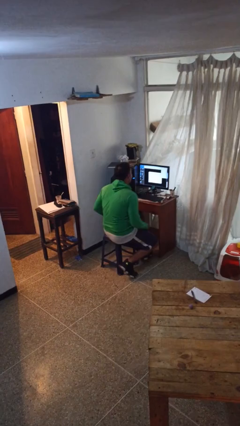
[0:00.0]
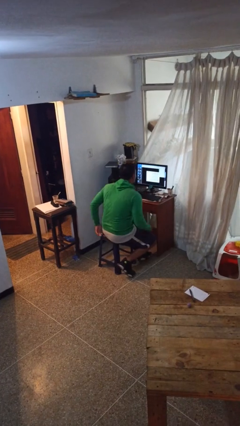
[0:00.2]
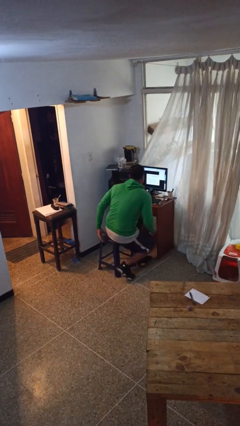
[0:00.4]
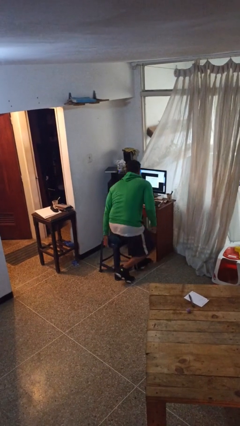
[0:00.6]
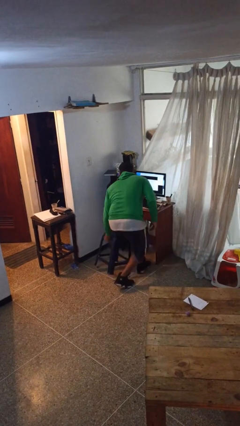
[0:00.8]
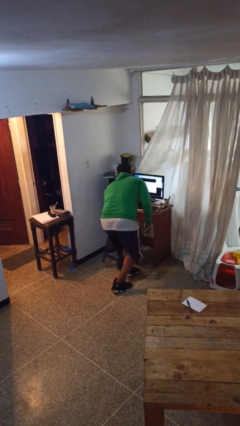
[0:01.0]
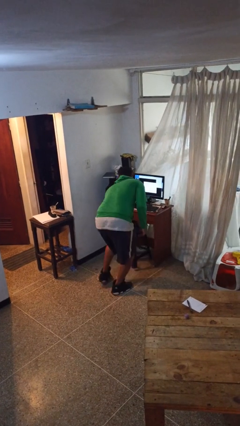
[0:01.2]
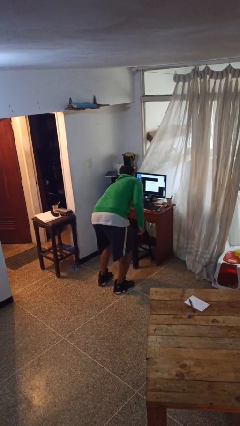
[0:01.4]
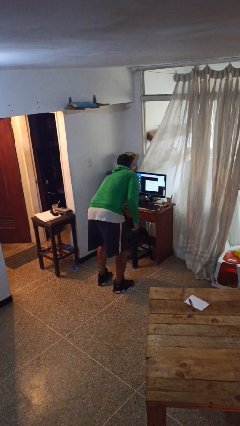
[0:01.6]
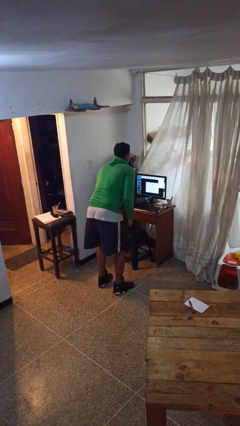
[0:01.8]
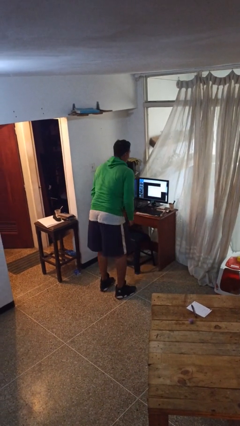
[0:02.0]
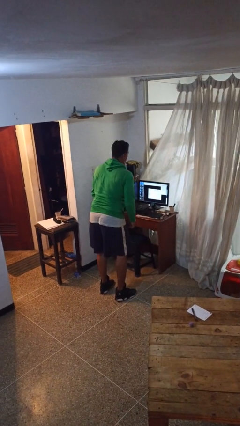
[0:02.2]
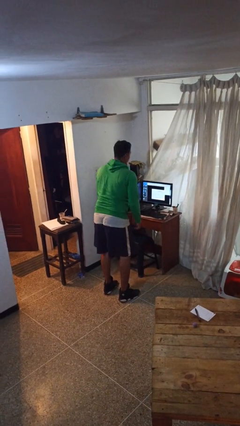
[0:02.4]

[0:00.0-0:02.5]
person stands up

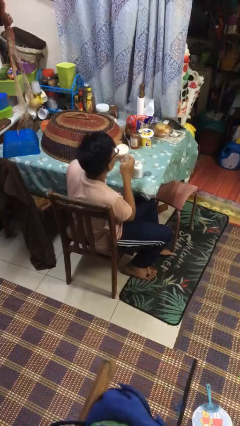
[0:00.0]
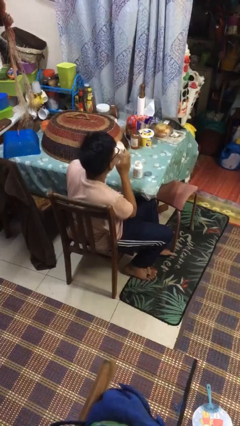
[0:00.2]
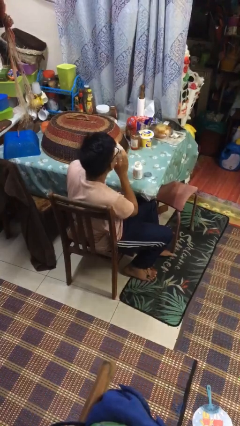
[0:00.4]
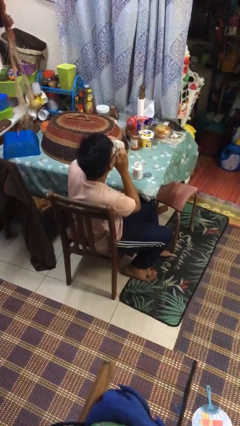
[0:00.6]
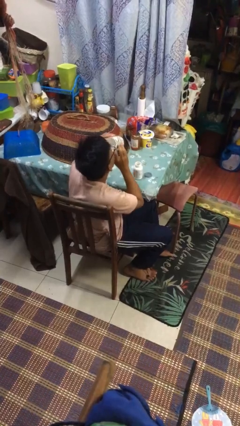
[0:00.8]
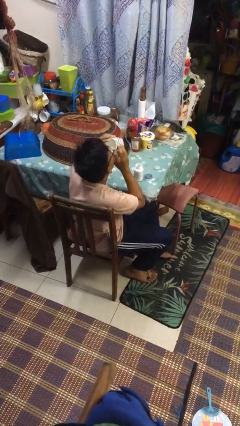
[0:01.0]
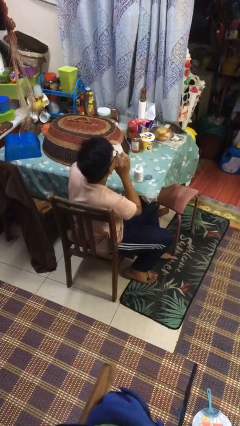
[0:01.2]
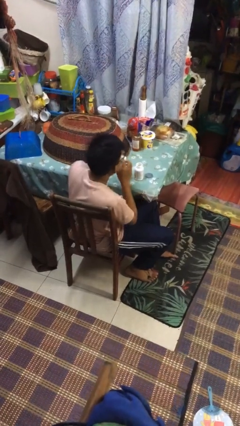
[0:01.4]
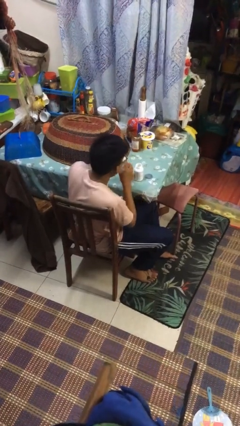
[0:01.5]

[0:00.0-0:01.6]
person drinks from cup

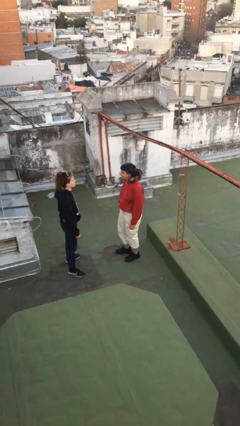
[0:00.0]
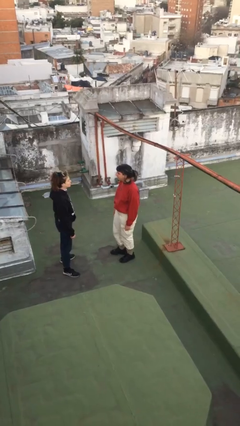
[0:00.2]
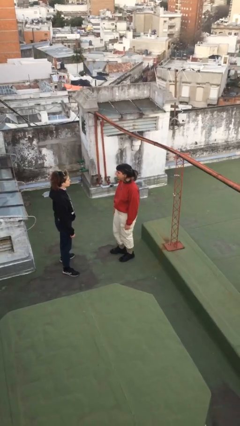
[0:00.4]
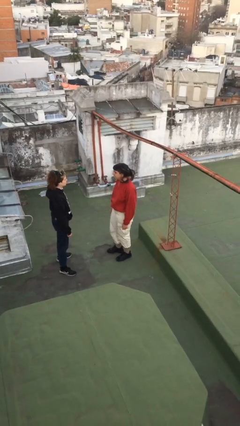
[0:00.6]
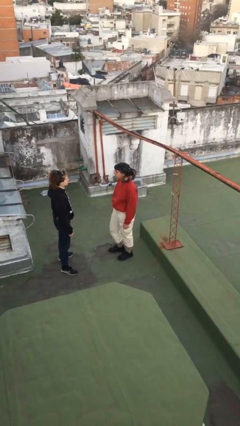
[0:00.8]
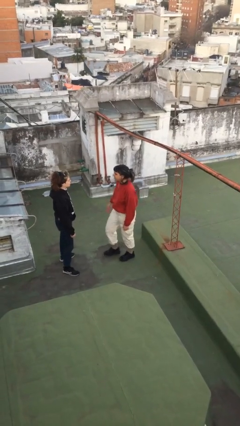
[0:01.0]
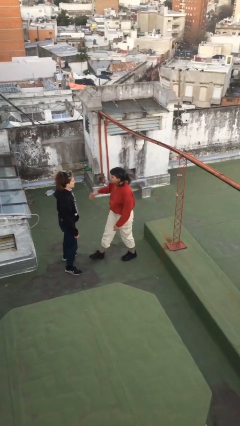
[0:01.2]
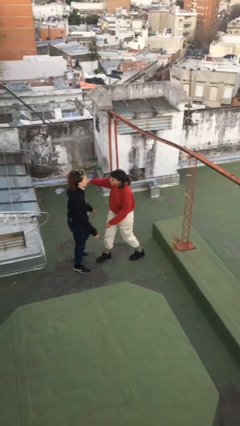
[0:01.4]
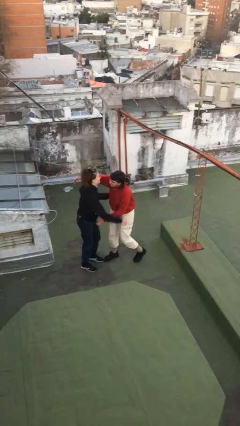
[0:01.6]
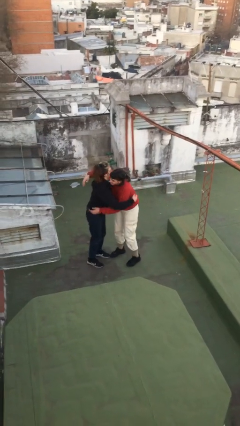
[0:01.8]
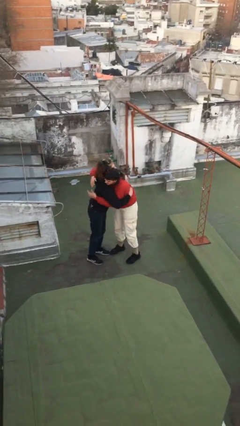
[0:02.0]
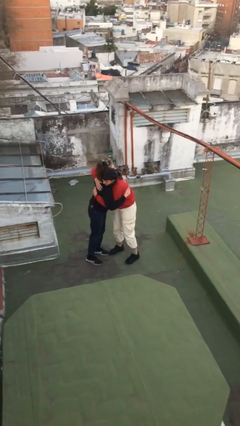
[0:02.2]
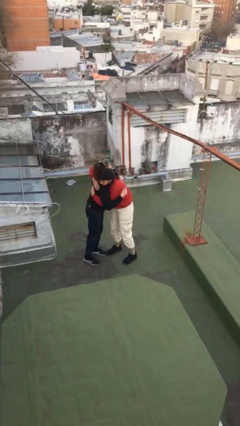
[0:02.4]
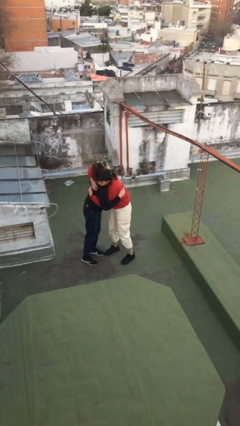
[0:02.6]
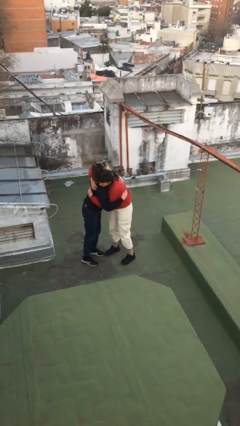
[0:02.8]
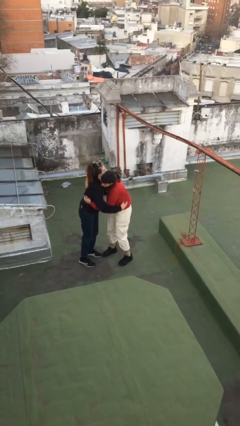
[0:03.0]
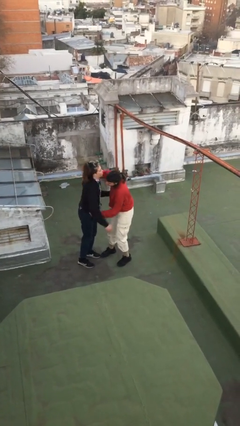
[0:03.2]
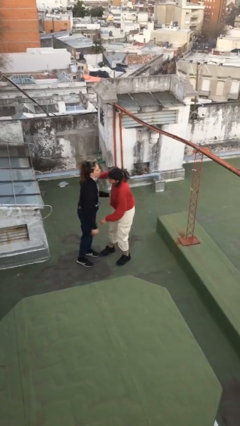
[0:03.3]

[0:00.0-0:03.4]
person embraces person

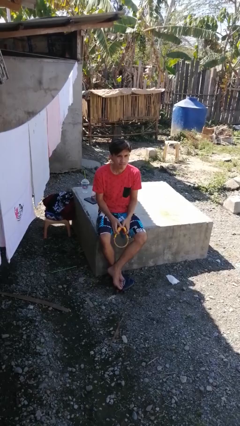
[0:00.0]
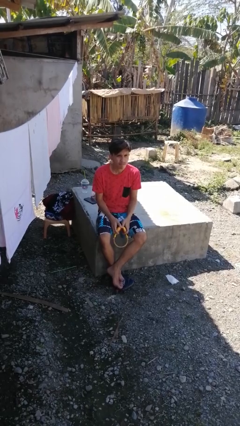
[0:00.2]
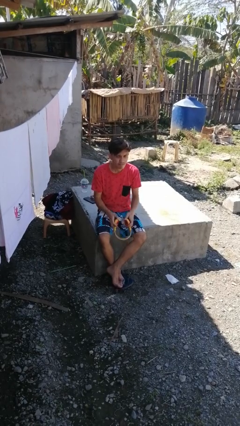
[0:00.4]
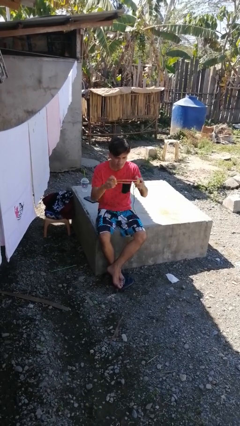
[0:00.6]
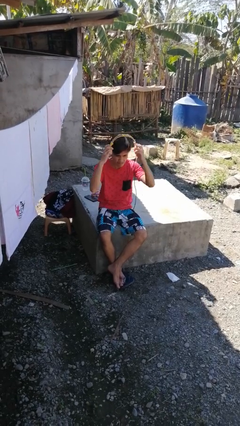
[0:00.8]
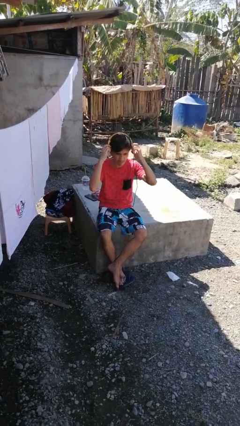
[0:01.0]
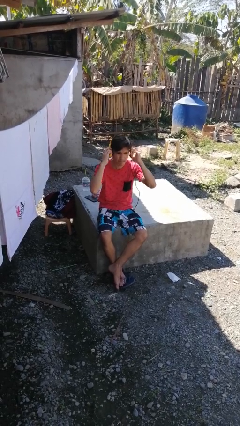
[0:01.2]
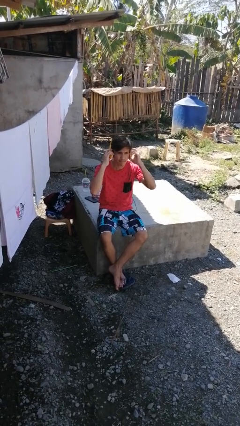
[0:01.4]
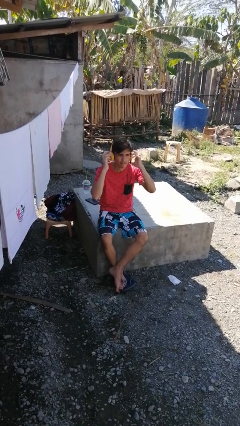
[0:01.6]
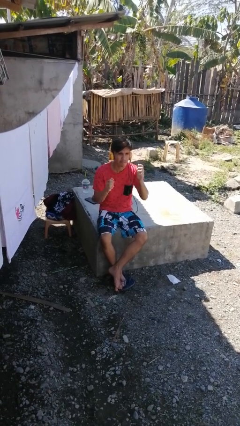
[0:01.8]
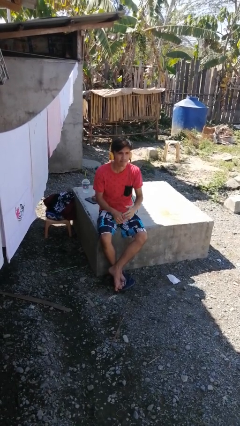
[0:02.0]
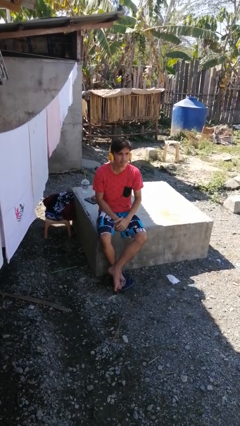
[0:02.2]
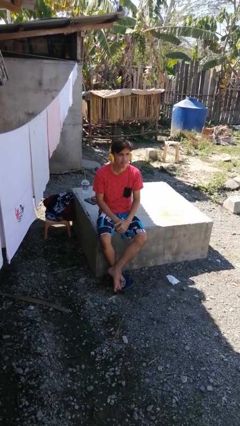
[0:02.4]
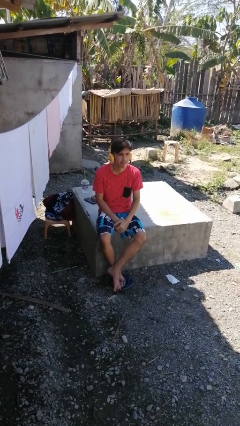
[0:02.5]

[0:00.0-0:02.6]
person puts on headphones

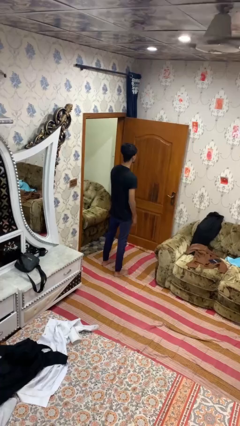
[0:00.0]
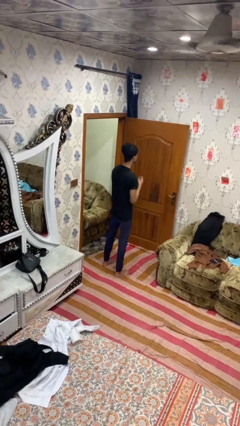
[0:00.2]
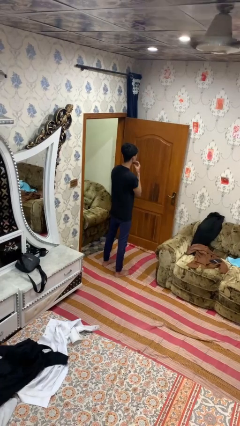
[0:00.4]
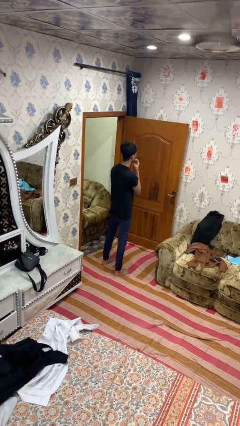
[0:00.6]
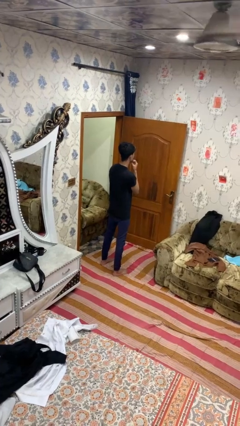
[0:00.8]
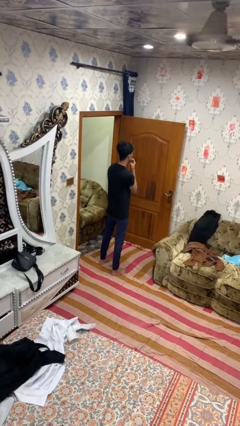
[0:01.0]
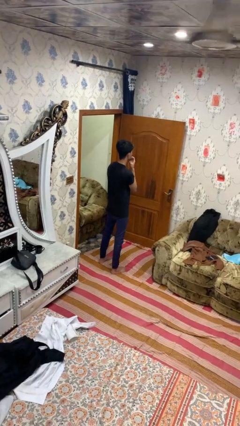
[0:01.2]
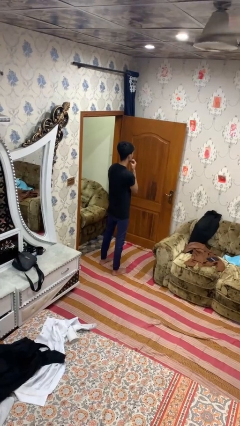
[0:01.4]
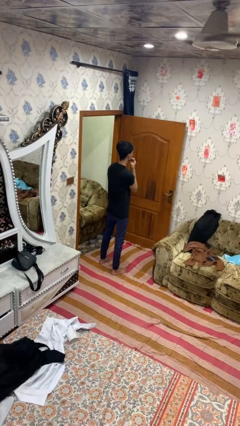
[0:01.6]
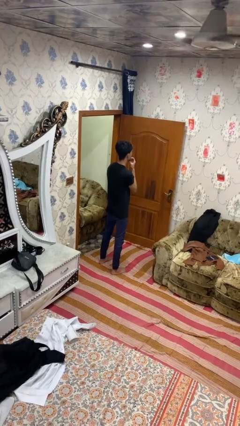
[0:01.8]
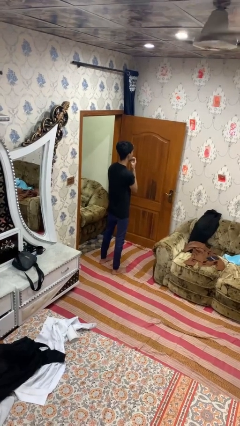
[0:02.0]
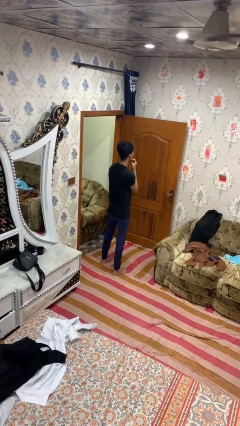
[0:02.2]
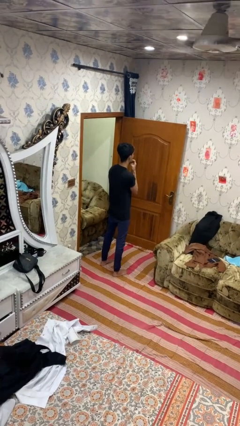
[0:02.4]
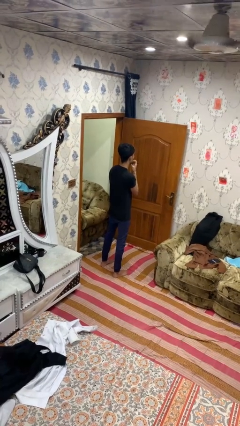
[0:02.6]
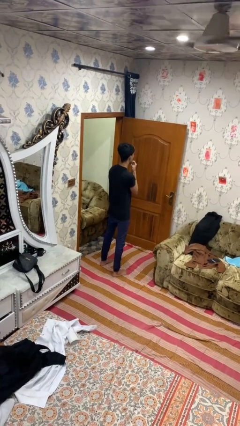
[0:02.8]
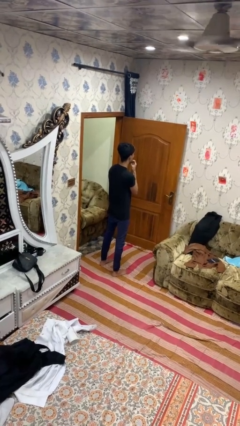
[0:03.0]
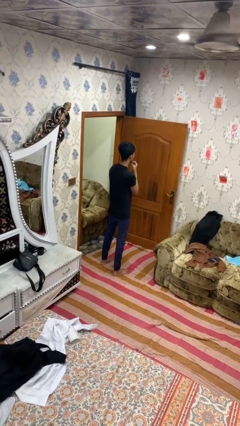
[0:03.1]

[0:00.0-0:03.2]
person strokes chin

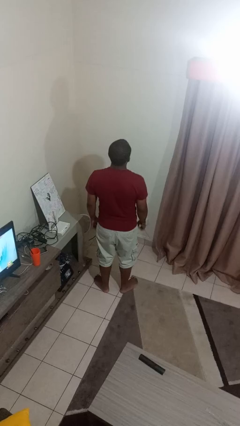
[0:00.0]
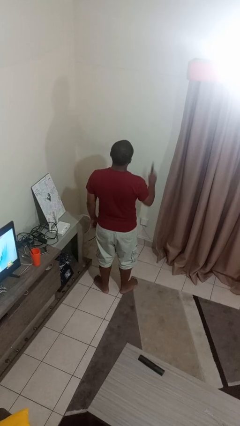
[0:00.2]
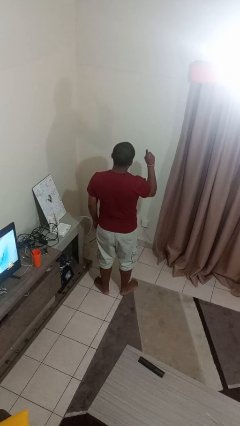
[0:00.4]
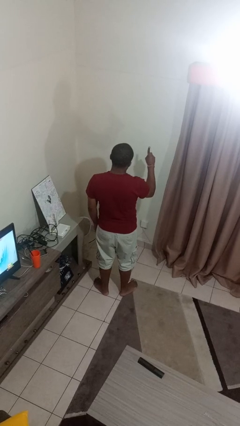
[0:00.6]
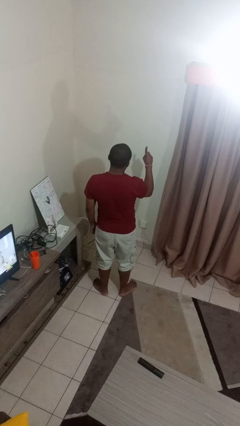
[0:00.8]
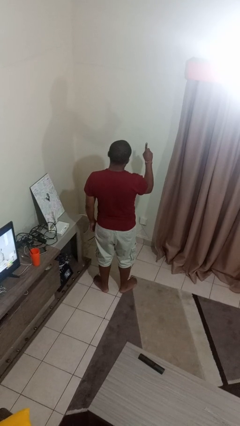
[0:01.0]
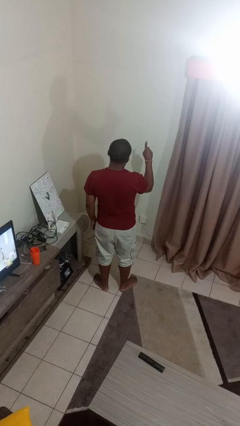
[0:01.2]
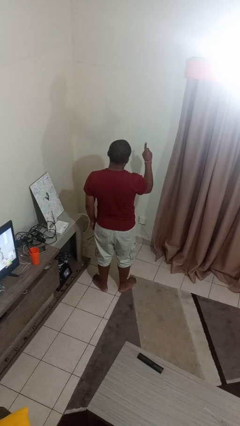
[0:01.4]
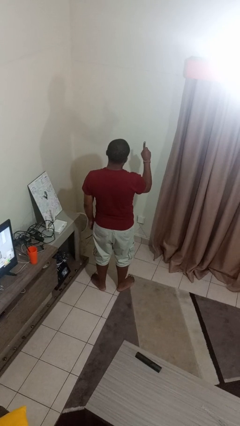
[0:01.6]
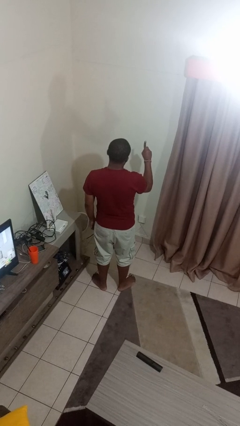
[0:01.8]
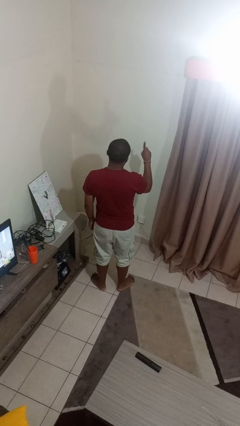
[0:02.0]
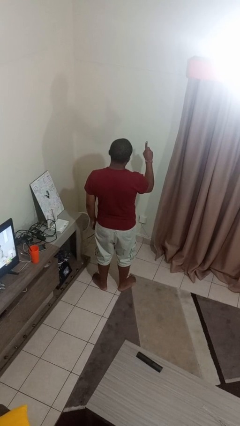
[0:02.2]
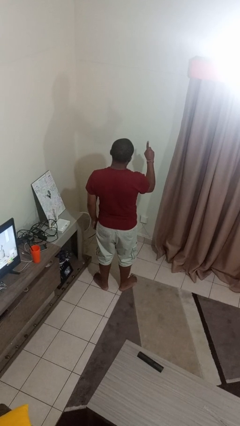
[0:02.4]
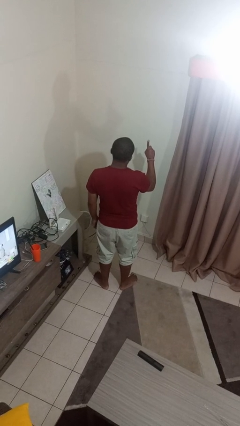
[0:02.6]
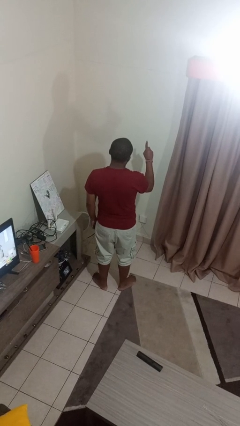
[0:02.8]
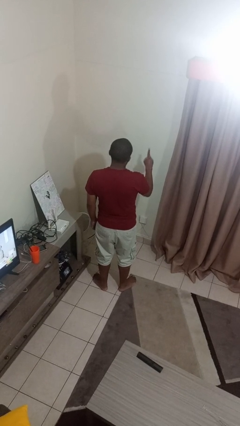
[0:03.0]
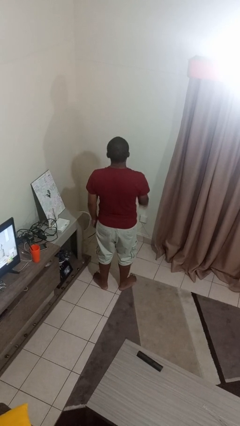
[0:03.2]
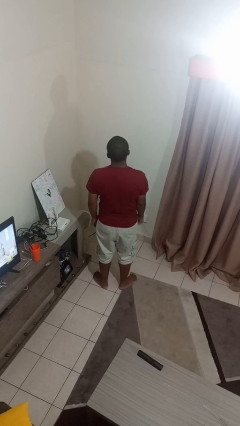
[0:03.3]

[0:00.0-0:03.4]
person gestures number one

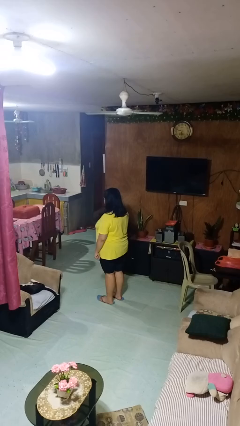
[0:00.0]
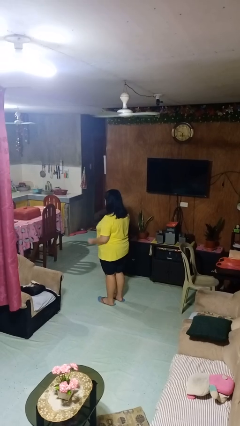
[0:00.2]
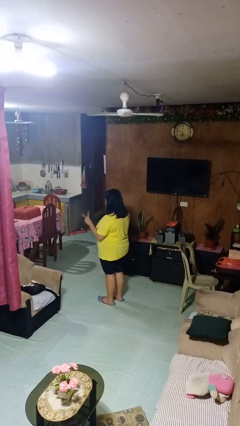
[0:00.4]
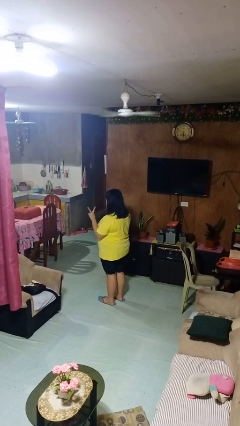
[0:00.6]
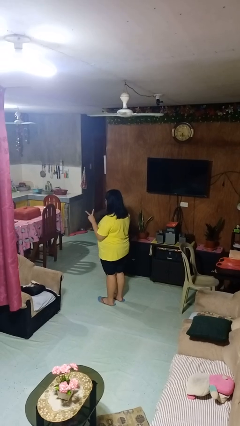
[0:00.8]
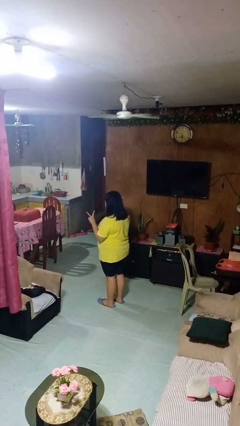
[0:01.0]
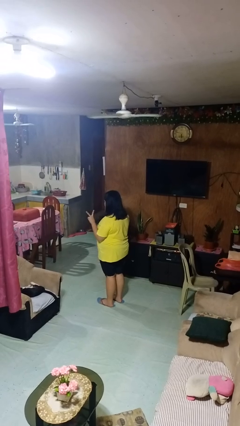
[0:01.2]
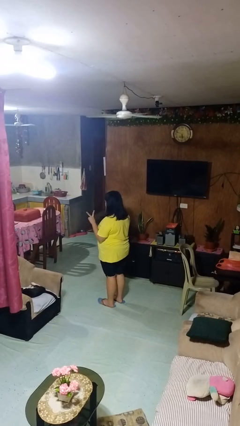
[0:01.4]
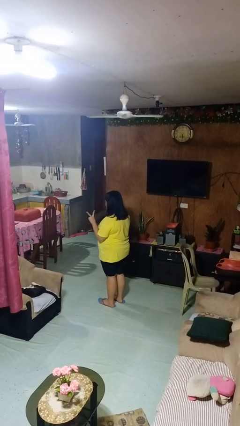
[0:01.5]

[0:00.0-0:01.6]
person gestures peace
